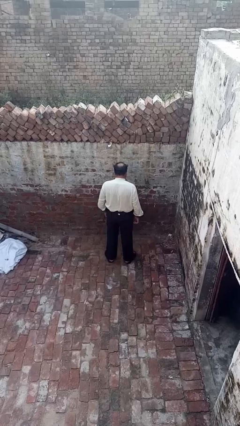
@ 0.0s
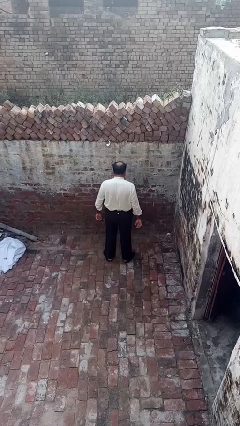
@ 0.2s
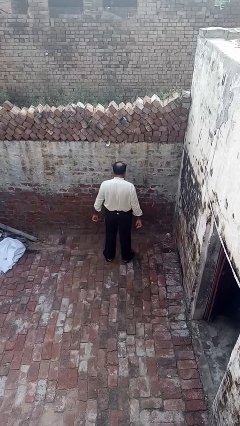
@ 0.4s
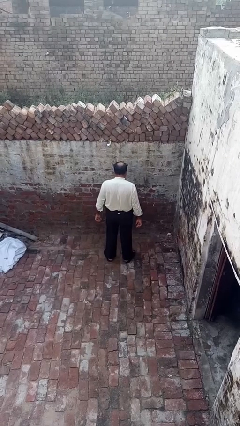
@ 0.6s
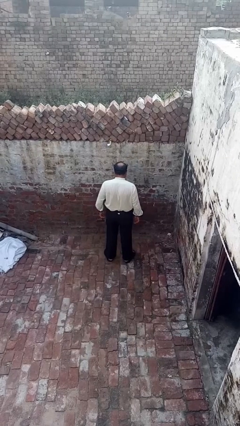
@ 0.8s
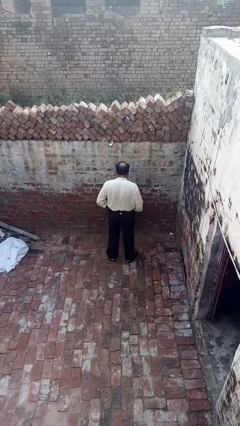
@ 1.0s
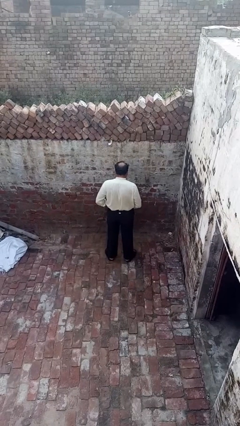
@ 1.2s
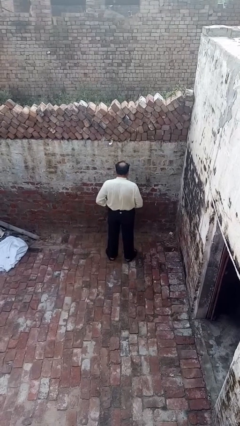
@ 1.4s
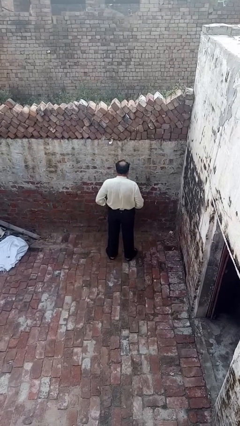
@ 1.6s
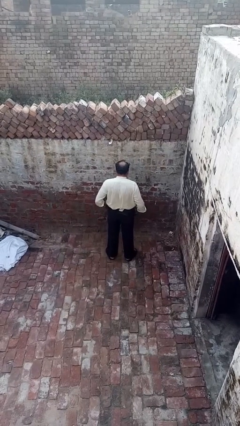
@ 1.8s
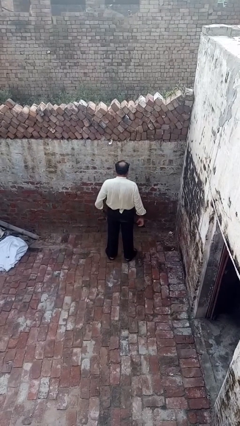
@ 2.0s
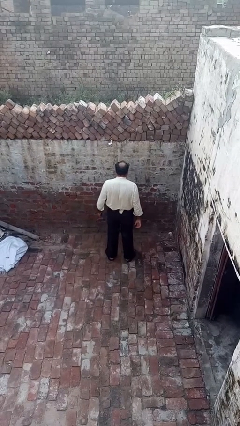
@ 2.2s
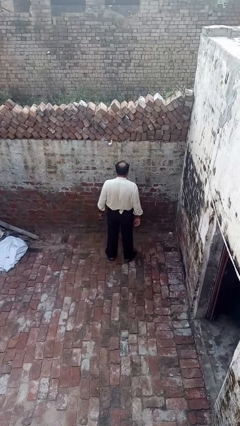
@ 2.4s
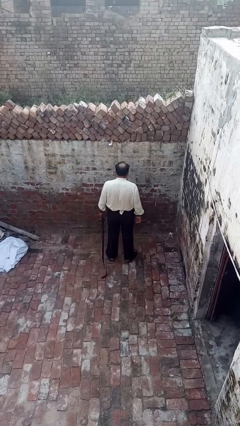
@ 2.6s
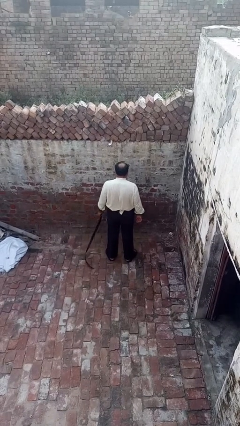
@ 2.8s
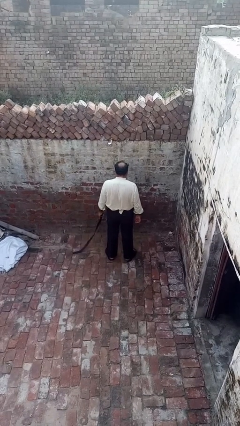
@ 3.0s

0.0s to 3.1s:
person takes off belt

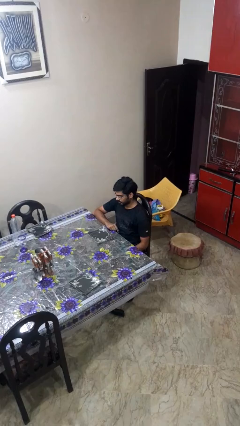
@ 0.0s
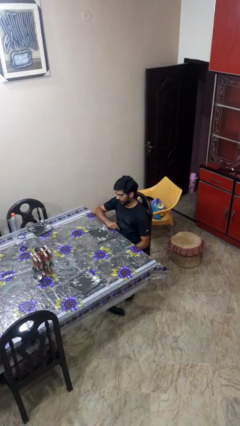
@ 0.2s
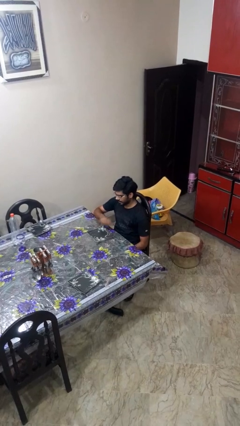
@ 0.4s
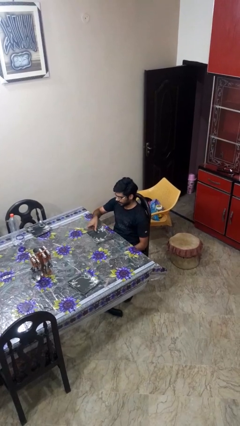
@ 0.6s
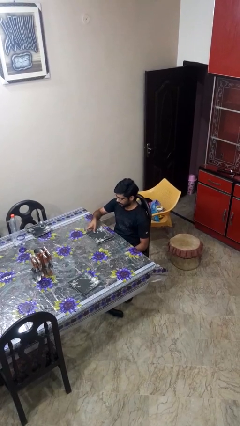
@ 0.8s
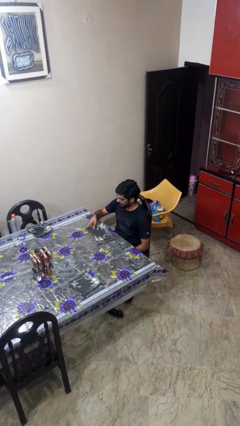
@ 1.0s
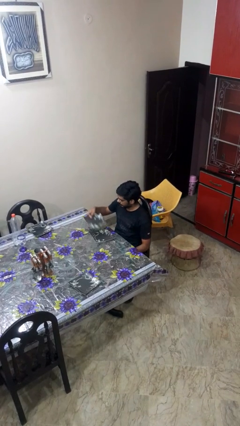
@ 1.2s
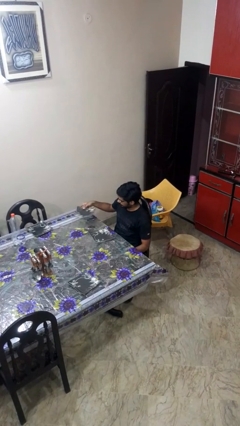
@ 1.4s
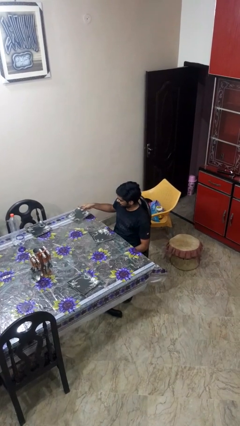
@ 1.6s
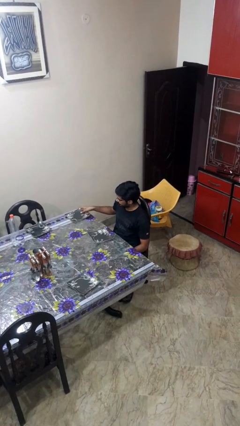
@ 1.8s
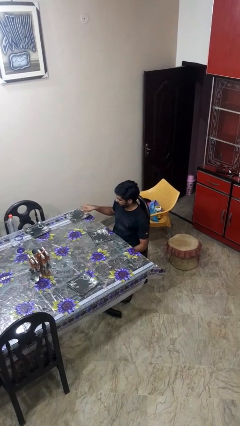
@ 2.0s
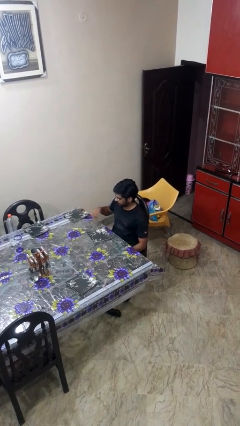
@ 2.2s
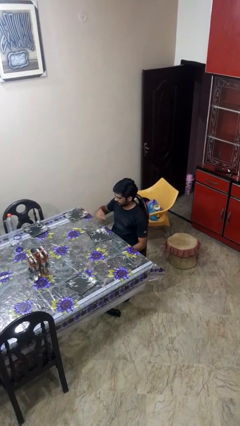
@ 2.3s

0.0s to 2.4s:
person sets table

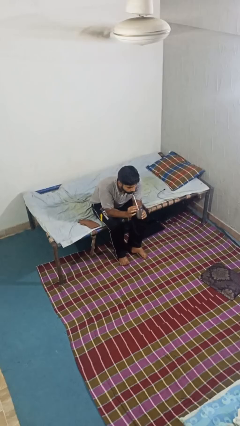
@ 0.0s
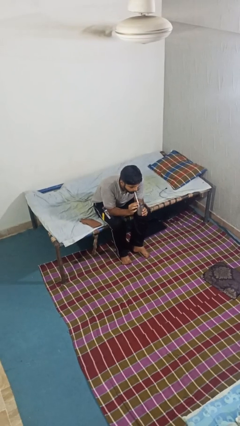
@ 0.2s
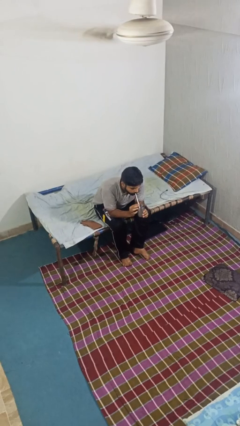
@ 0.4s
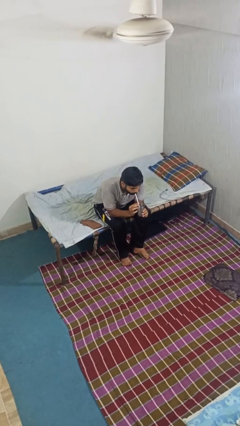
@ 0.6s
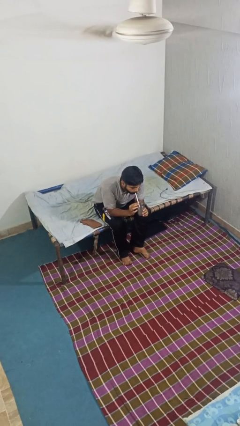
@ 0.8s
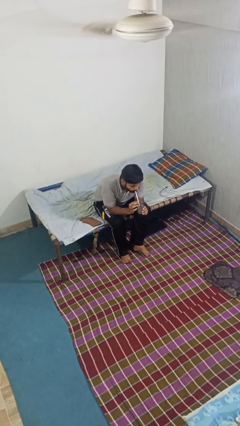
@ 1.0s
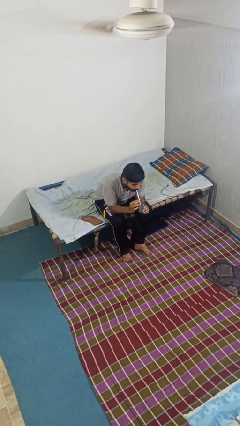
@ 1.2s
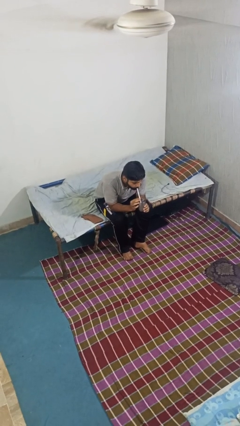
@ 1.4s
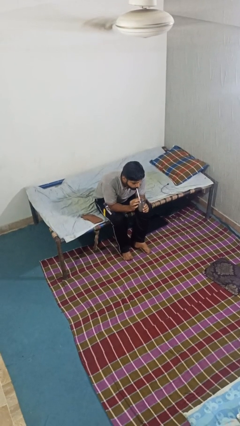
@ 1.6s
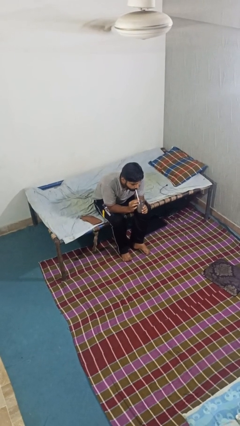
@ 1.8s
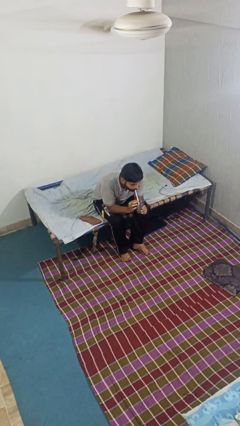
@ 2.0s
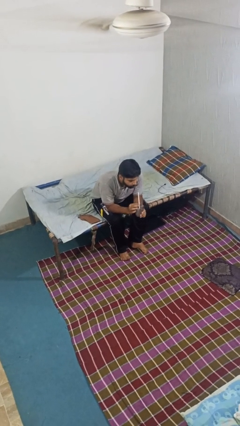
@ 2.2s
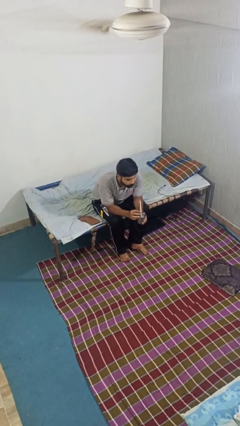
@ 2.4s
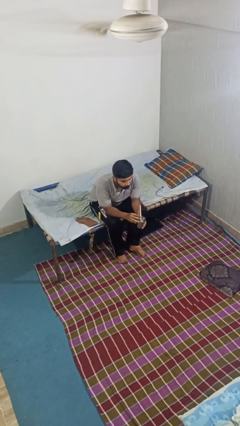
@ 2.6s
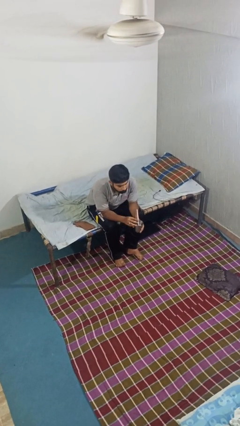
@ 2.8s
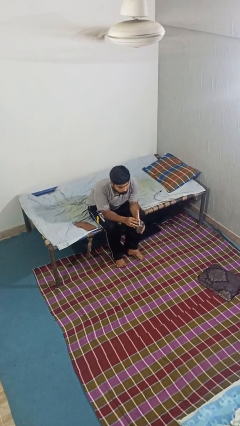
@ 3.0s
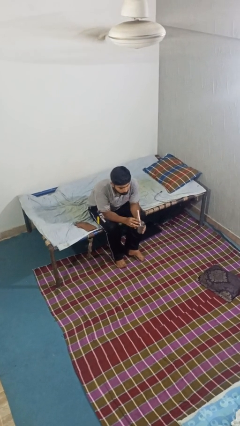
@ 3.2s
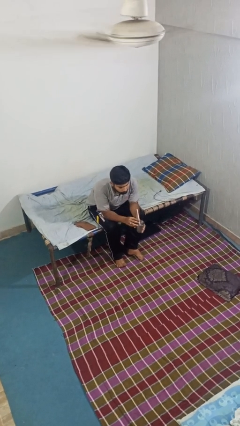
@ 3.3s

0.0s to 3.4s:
person drinks from straw

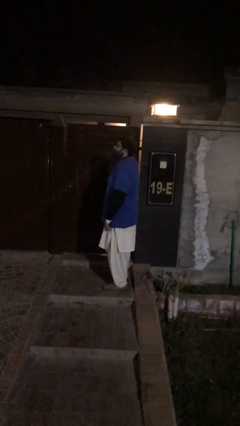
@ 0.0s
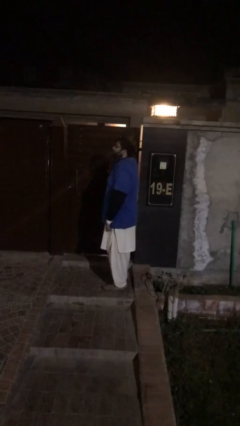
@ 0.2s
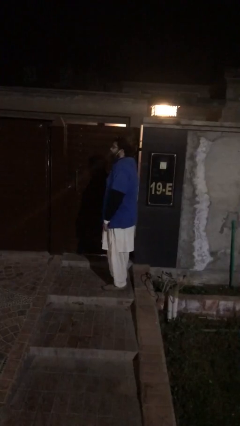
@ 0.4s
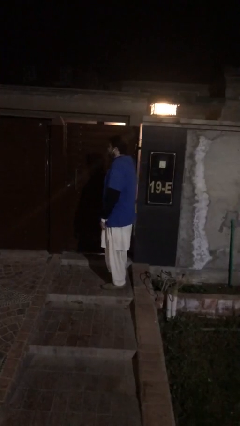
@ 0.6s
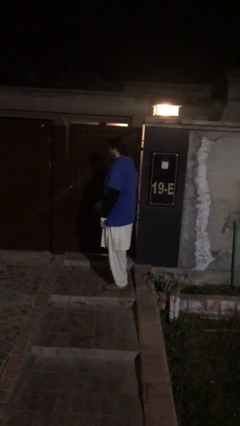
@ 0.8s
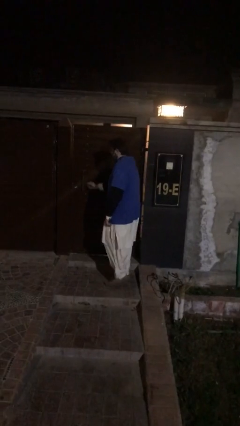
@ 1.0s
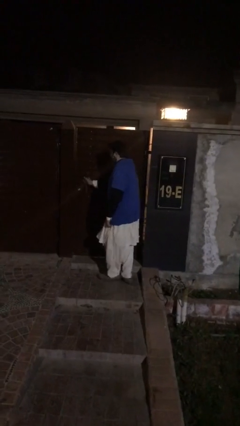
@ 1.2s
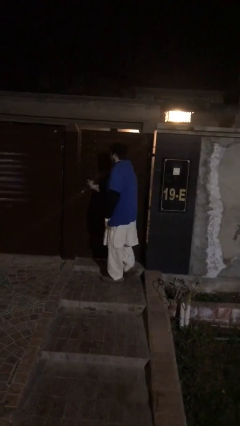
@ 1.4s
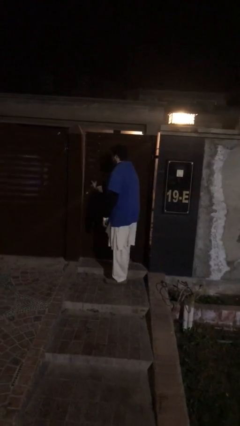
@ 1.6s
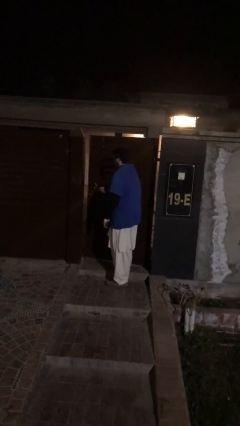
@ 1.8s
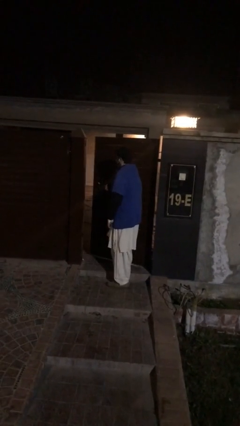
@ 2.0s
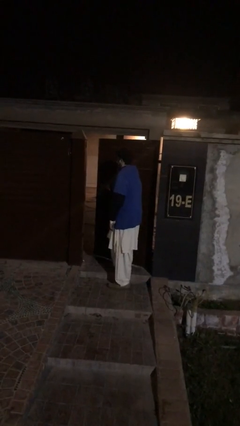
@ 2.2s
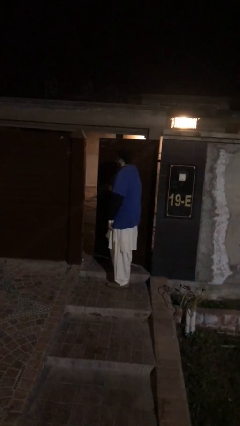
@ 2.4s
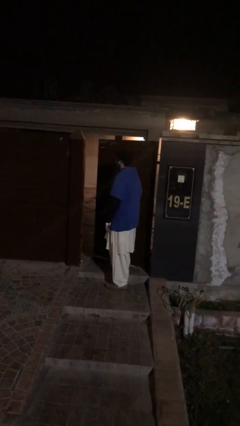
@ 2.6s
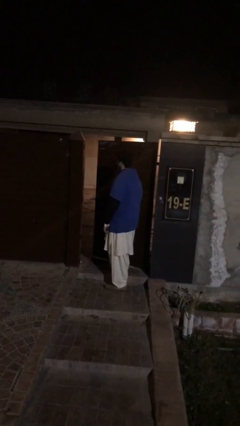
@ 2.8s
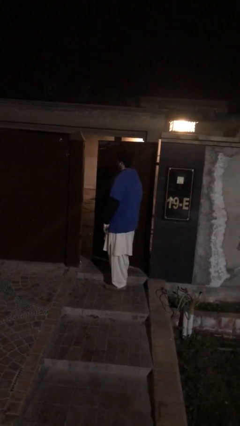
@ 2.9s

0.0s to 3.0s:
person opens facility door

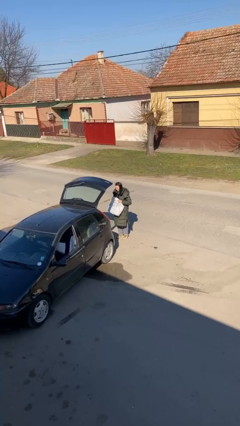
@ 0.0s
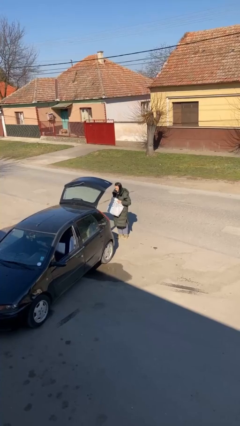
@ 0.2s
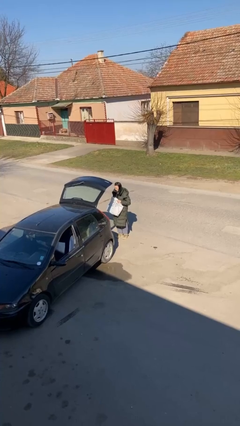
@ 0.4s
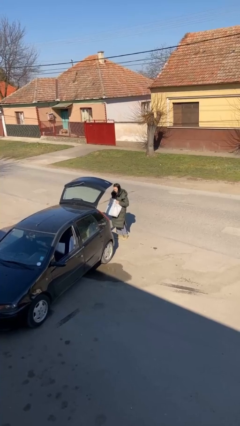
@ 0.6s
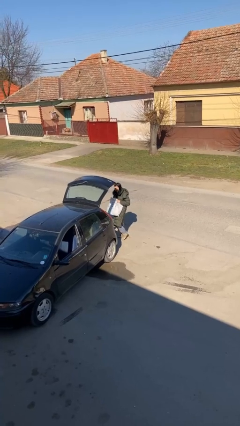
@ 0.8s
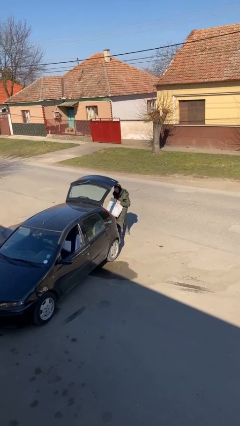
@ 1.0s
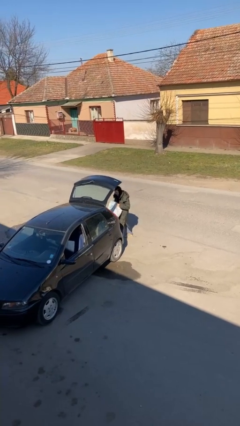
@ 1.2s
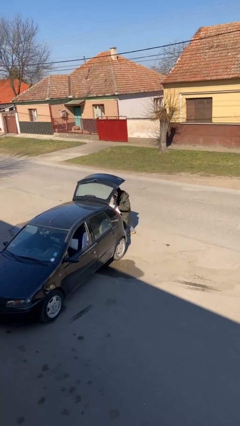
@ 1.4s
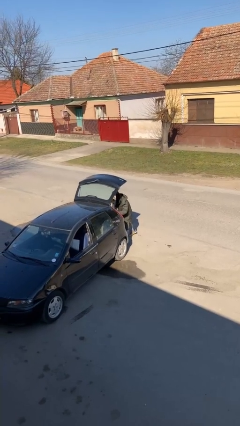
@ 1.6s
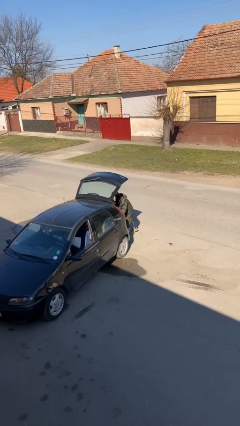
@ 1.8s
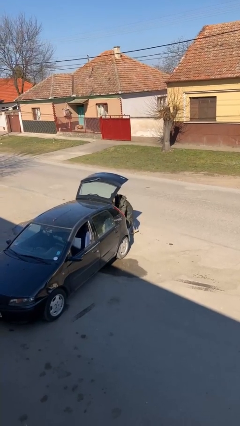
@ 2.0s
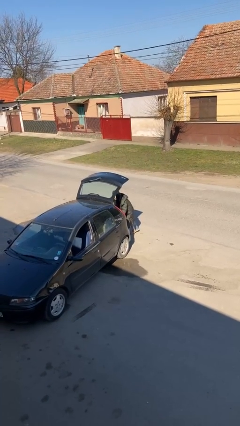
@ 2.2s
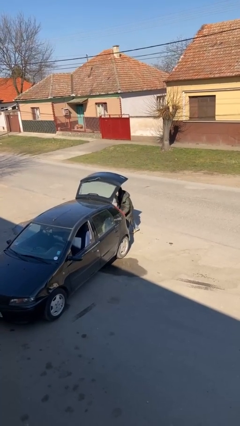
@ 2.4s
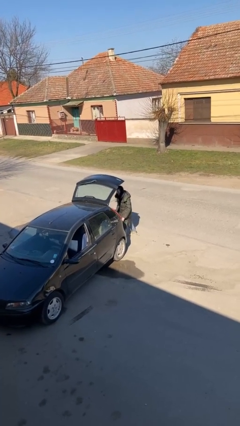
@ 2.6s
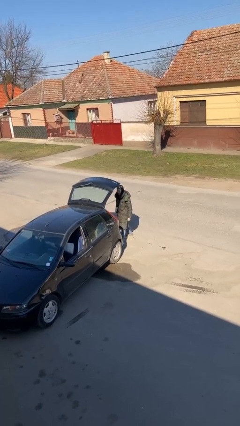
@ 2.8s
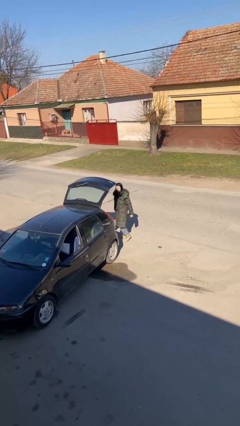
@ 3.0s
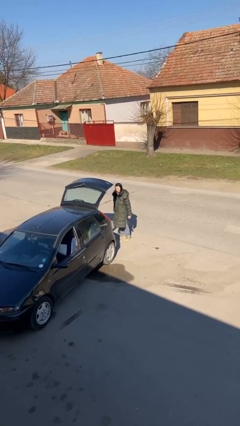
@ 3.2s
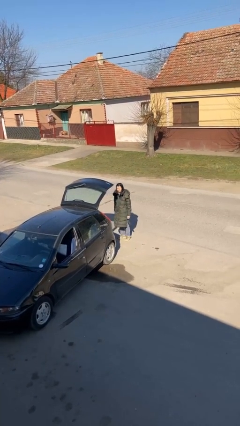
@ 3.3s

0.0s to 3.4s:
person loads car

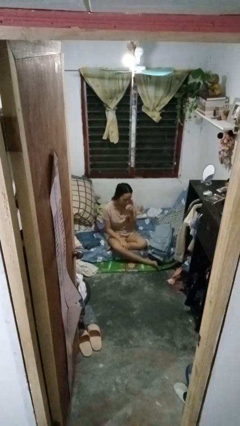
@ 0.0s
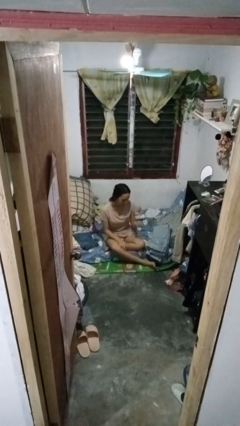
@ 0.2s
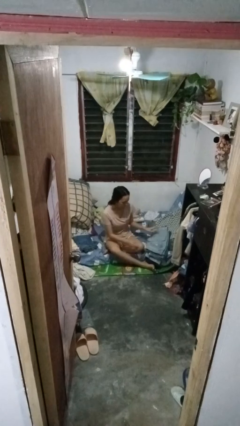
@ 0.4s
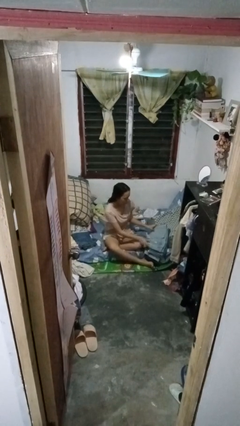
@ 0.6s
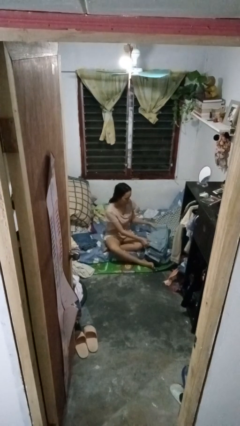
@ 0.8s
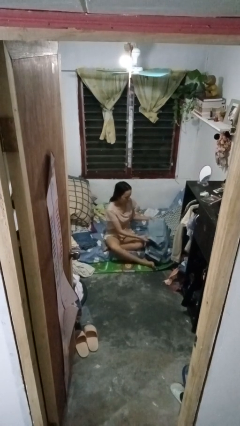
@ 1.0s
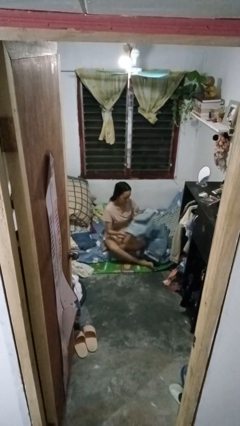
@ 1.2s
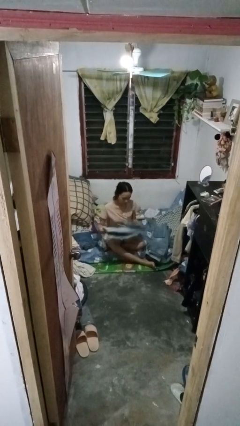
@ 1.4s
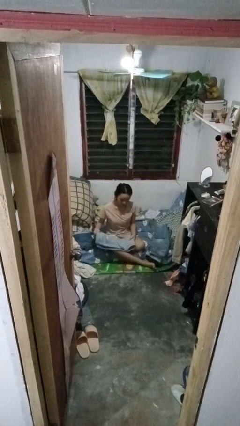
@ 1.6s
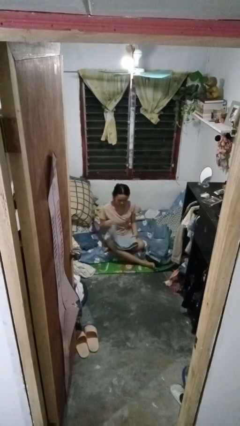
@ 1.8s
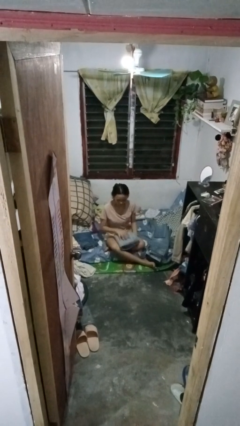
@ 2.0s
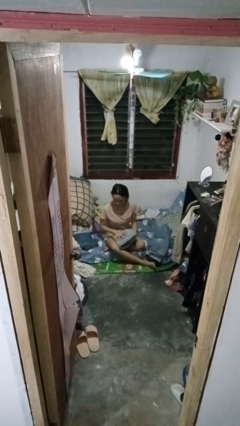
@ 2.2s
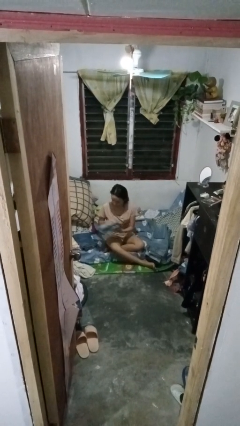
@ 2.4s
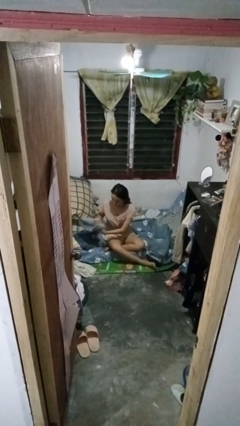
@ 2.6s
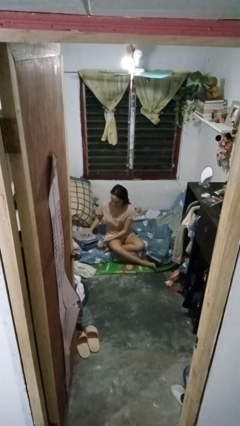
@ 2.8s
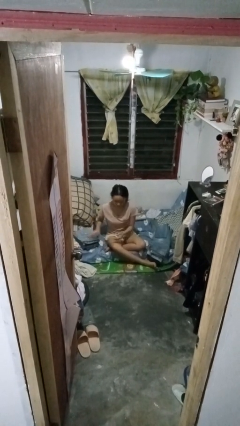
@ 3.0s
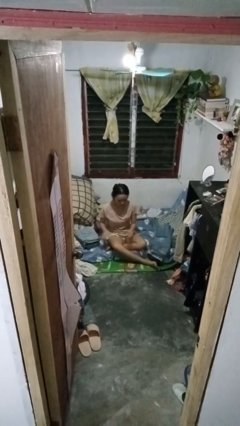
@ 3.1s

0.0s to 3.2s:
person folds pants
